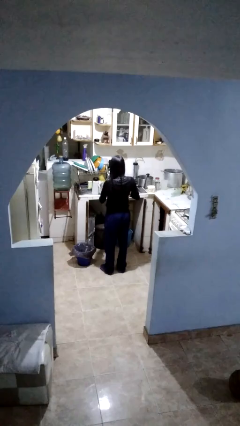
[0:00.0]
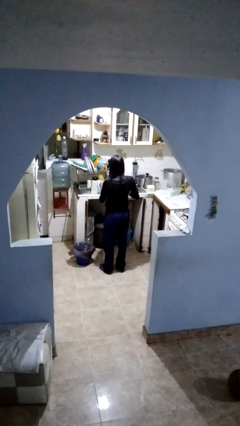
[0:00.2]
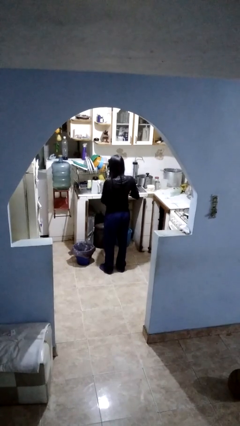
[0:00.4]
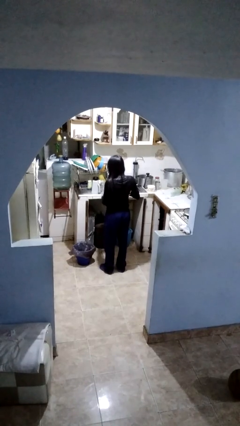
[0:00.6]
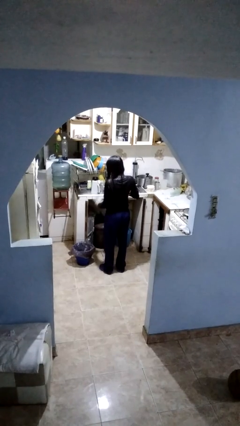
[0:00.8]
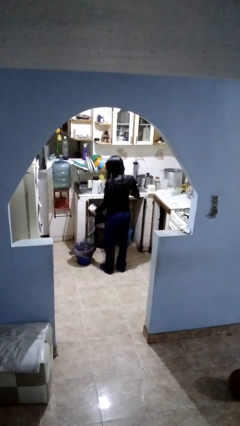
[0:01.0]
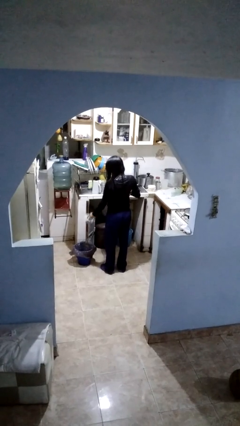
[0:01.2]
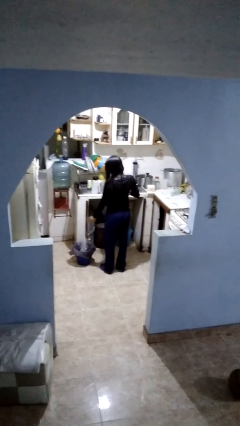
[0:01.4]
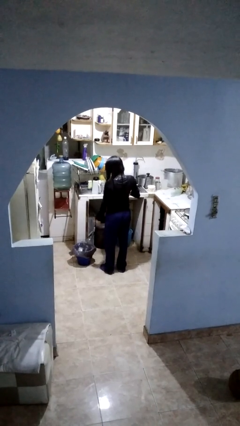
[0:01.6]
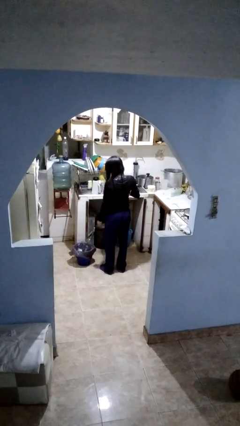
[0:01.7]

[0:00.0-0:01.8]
person discards trash

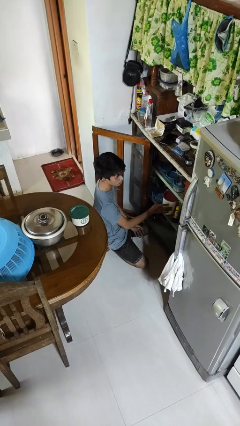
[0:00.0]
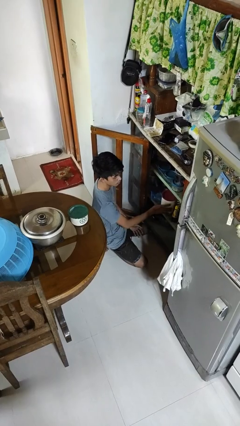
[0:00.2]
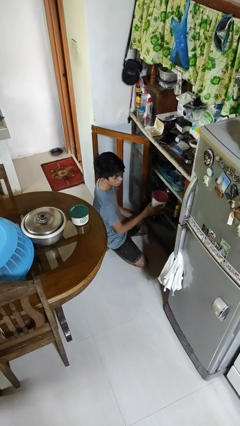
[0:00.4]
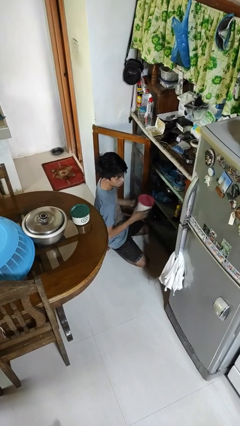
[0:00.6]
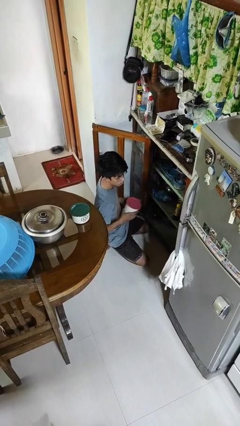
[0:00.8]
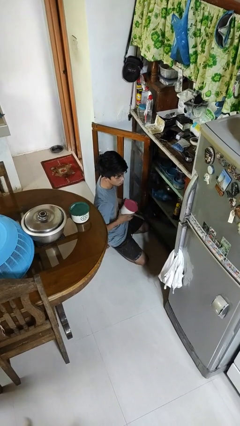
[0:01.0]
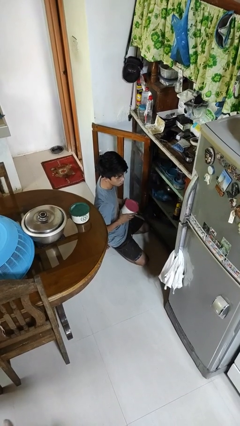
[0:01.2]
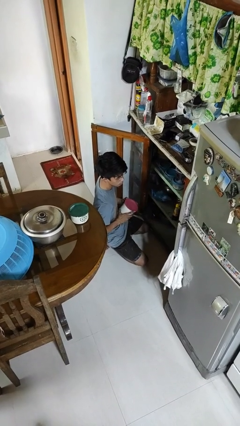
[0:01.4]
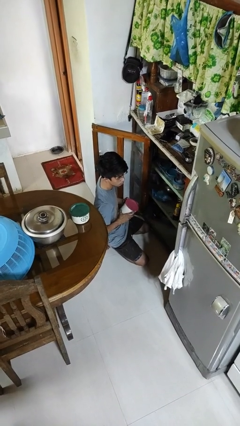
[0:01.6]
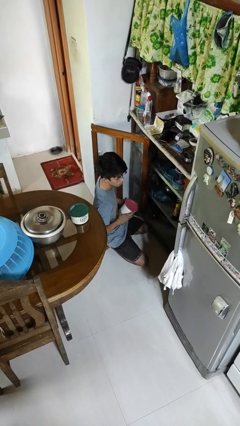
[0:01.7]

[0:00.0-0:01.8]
person picks up object from cabinet

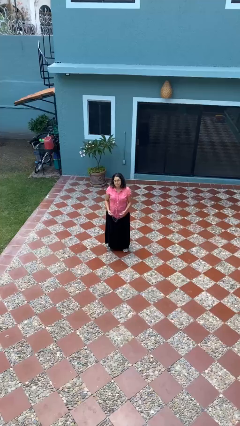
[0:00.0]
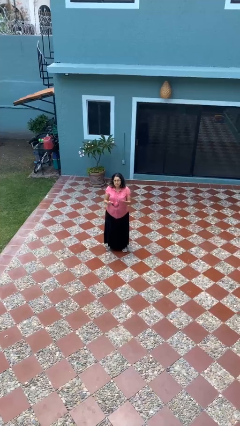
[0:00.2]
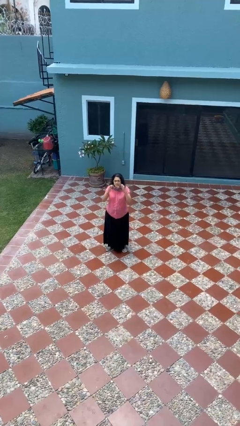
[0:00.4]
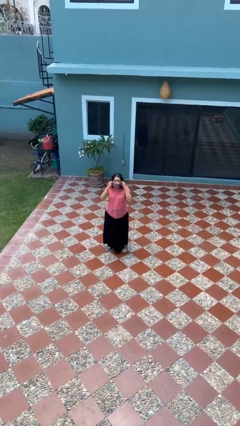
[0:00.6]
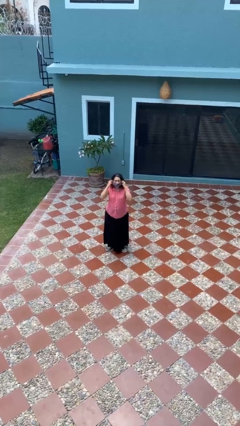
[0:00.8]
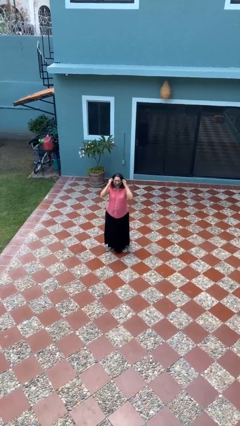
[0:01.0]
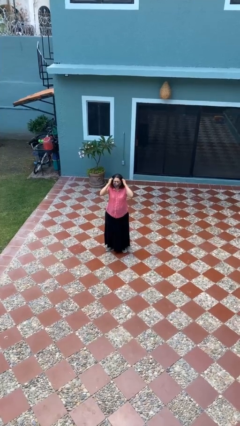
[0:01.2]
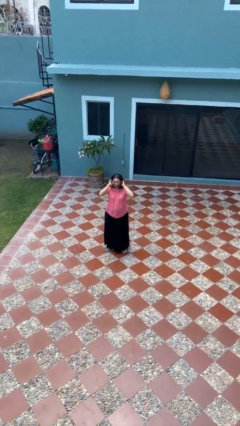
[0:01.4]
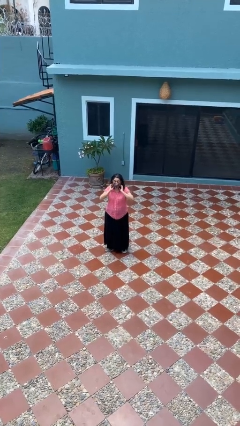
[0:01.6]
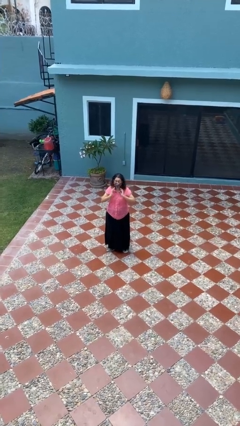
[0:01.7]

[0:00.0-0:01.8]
person puts on facemask

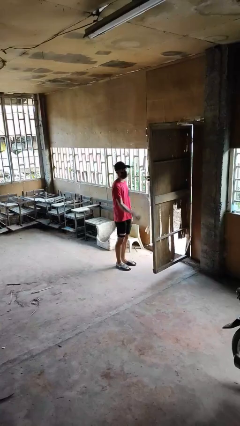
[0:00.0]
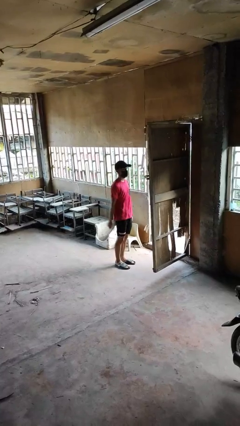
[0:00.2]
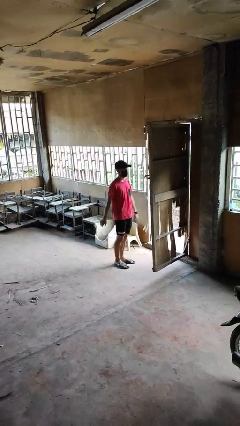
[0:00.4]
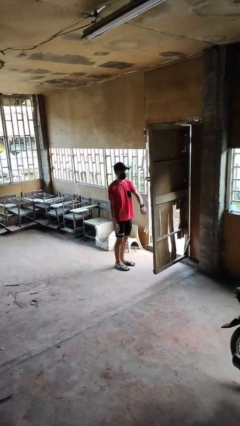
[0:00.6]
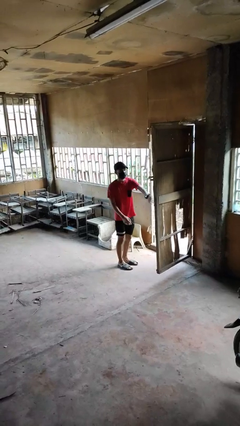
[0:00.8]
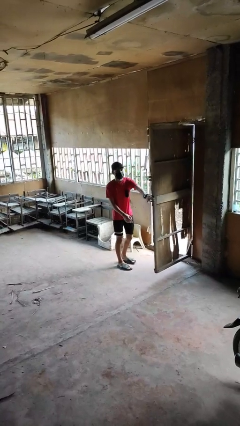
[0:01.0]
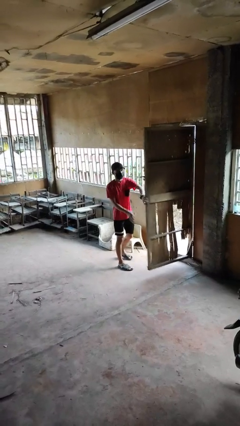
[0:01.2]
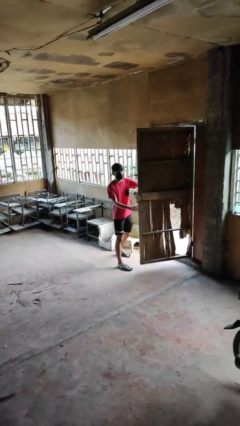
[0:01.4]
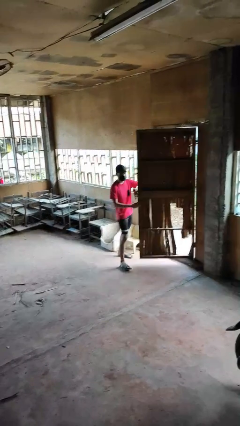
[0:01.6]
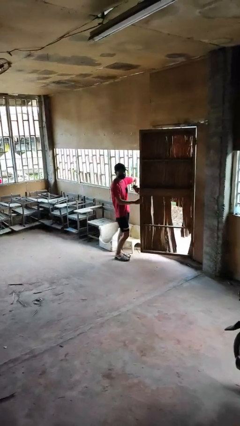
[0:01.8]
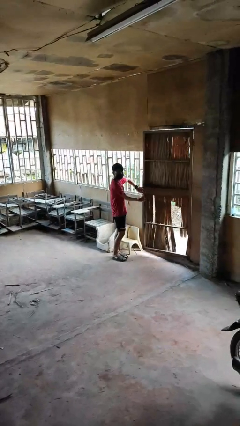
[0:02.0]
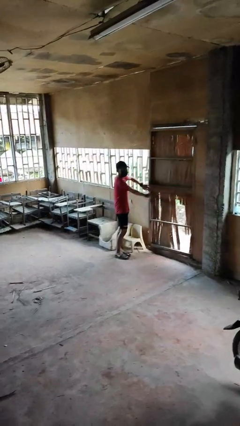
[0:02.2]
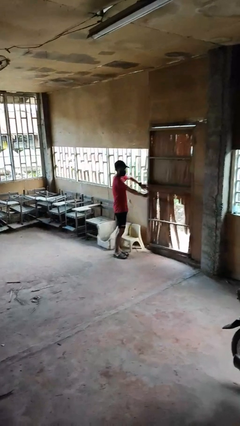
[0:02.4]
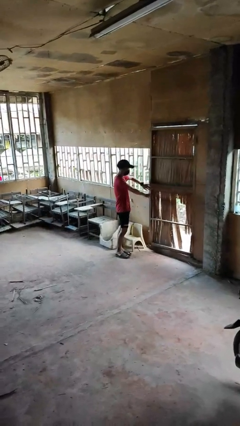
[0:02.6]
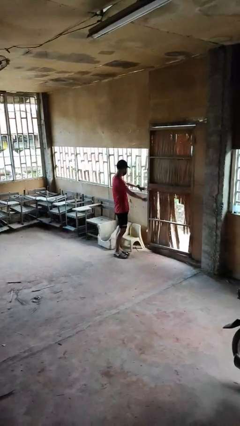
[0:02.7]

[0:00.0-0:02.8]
person closes facility door

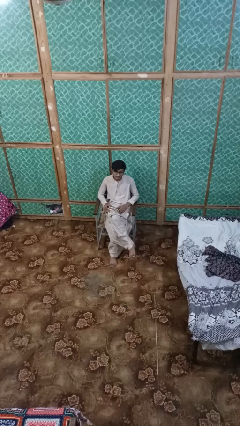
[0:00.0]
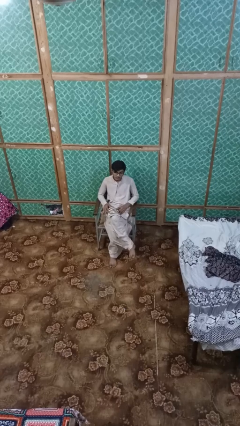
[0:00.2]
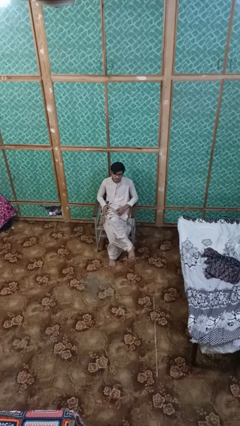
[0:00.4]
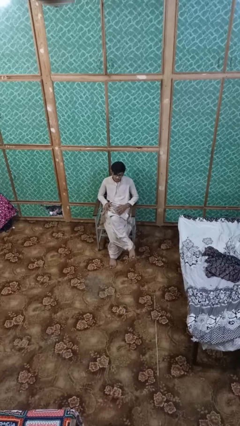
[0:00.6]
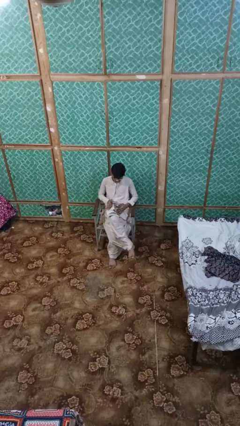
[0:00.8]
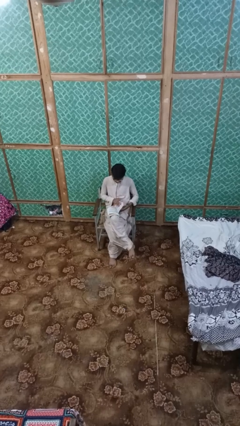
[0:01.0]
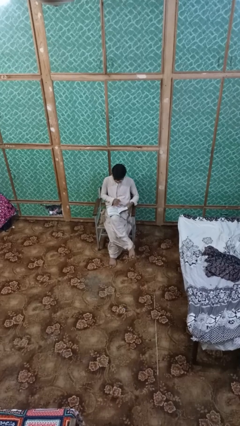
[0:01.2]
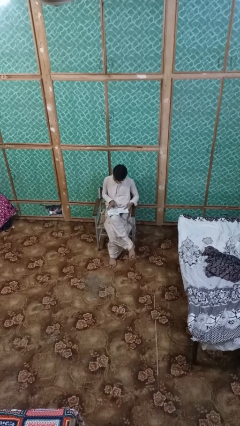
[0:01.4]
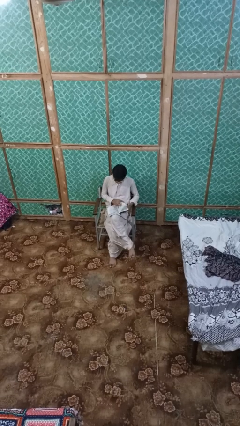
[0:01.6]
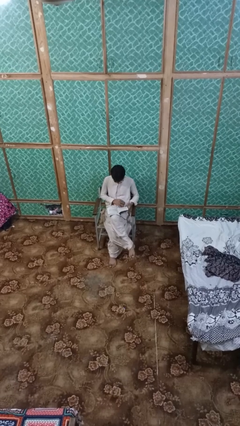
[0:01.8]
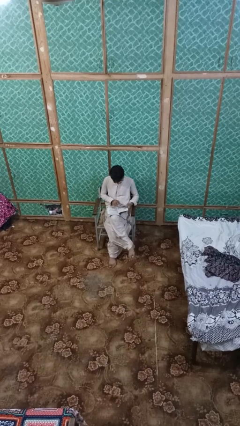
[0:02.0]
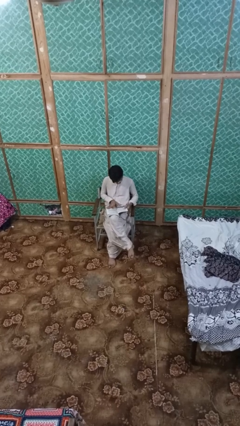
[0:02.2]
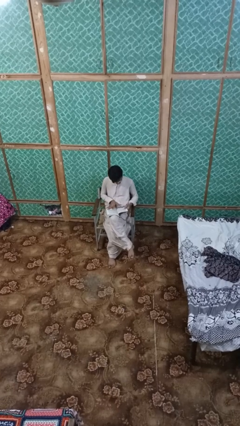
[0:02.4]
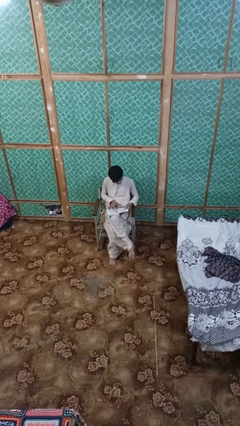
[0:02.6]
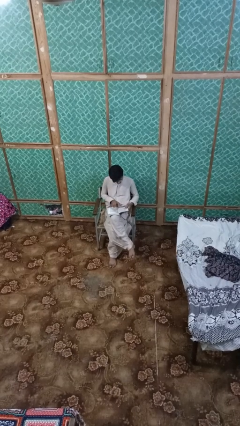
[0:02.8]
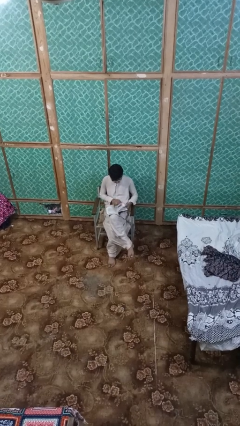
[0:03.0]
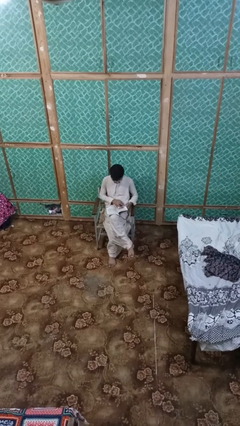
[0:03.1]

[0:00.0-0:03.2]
person reads book

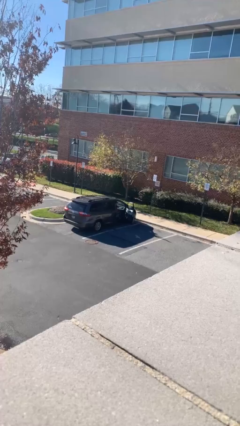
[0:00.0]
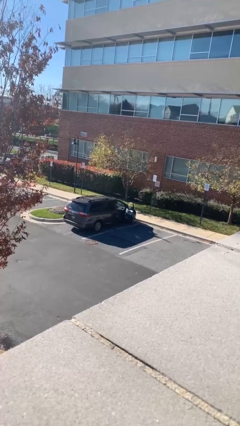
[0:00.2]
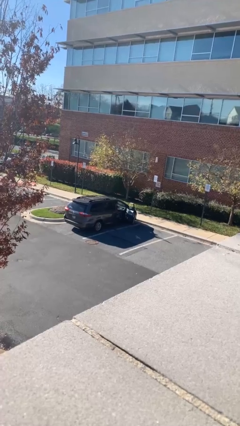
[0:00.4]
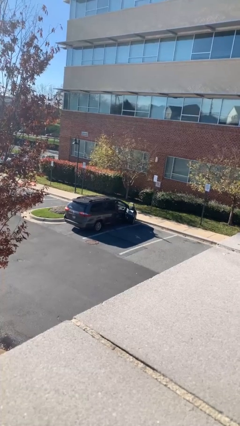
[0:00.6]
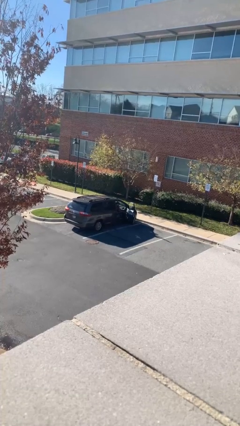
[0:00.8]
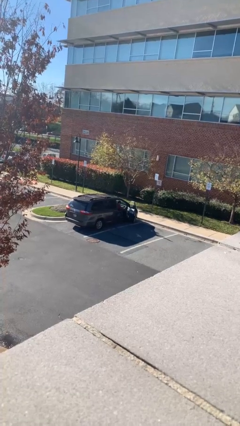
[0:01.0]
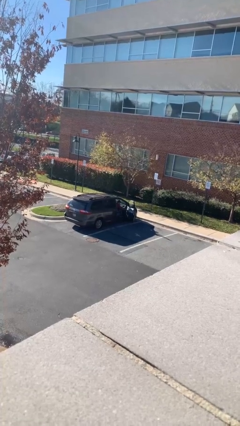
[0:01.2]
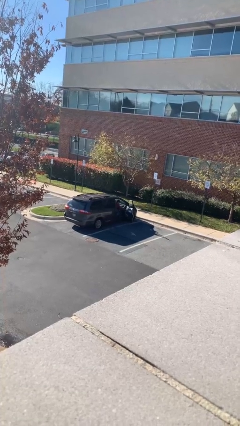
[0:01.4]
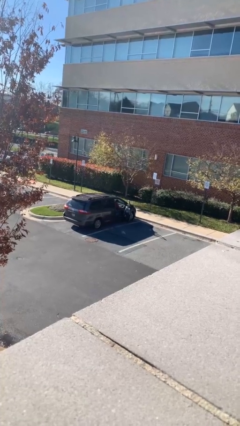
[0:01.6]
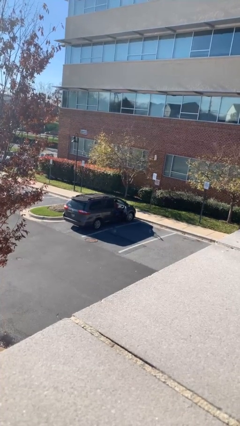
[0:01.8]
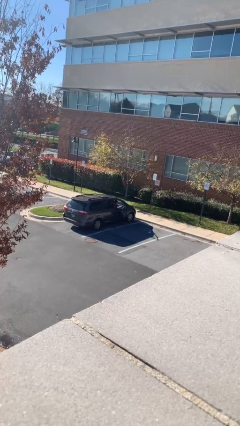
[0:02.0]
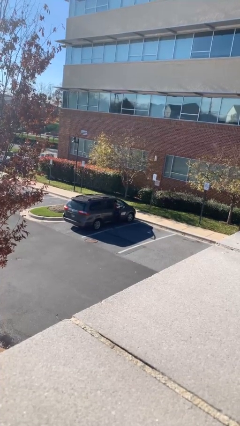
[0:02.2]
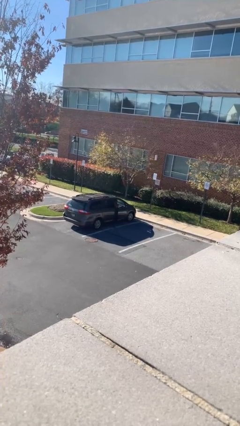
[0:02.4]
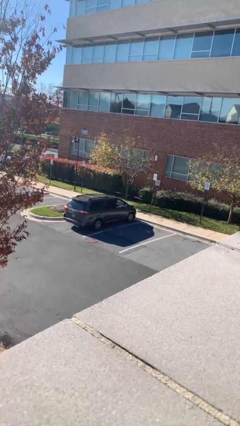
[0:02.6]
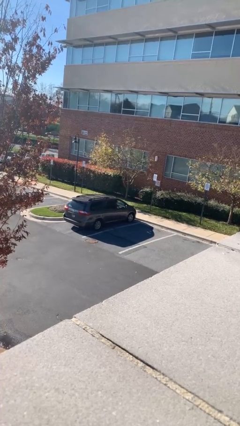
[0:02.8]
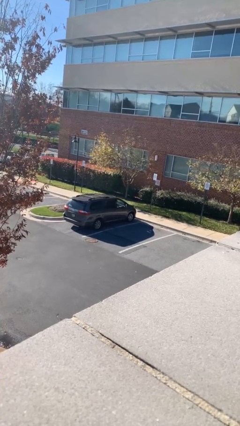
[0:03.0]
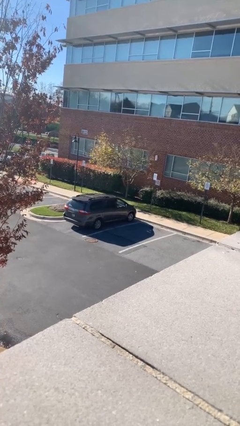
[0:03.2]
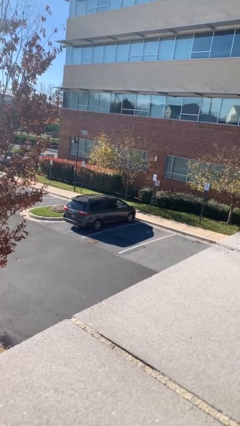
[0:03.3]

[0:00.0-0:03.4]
person closes car door

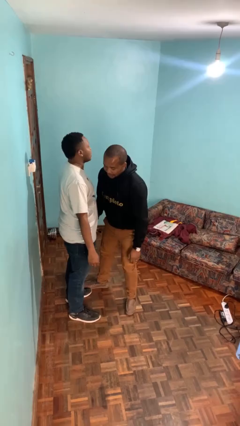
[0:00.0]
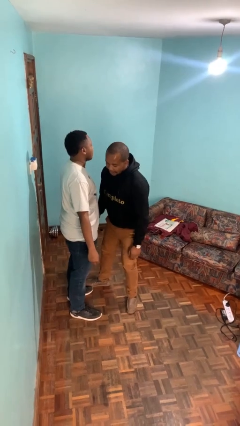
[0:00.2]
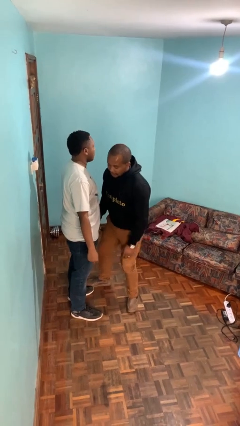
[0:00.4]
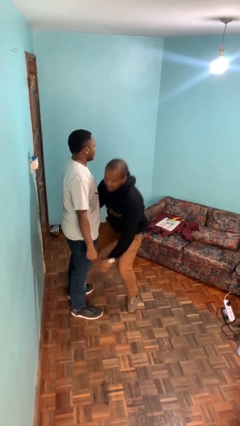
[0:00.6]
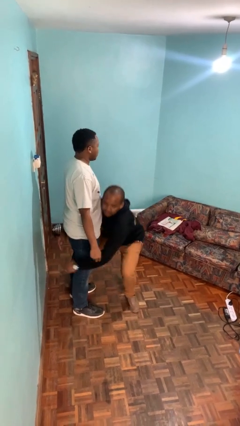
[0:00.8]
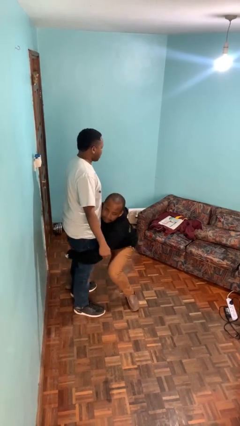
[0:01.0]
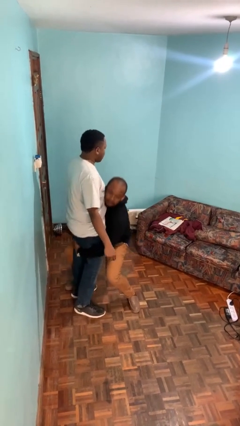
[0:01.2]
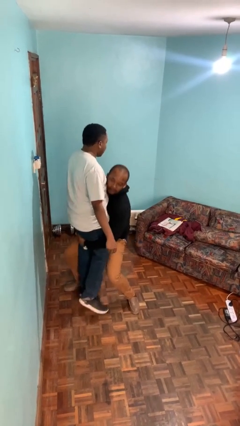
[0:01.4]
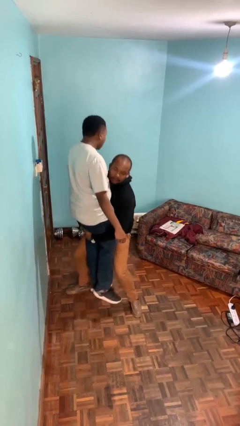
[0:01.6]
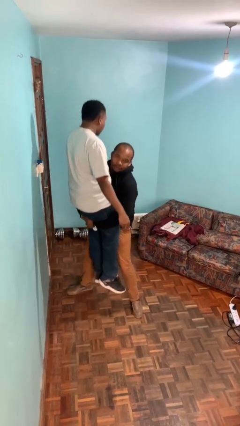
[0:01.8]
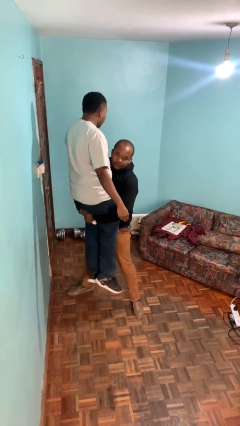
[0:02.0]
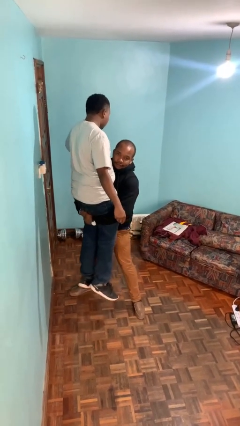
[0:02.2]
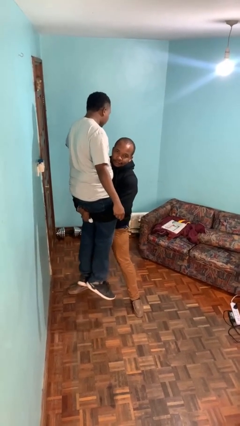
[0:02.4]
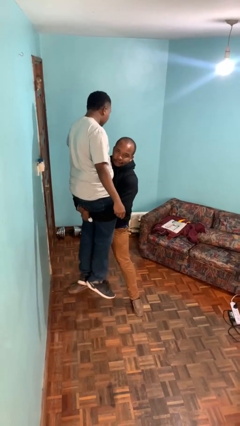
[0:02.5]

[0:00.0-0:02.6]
person picks up person
